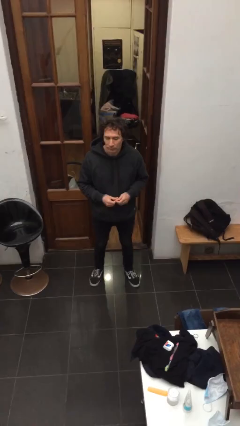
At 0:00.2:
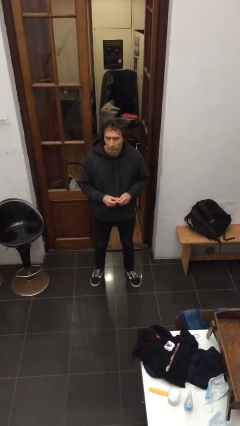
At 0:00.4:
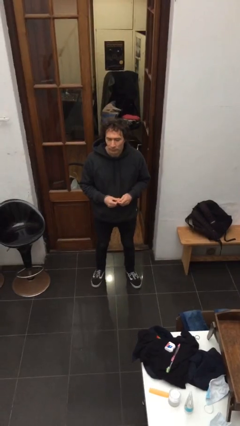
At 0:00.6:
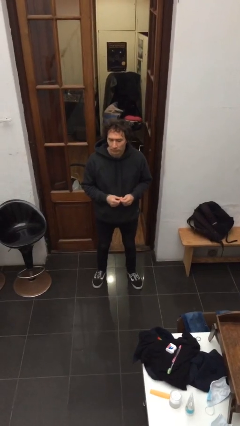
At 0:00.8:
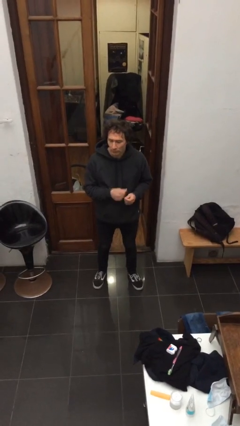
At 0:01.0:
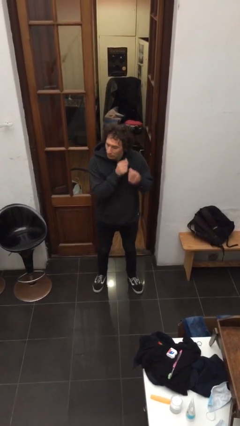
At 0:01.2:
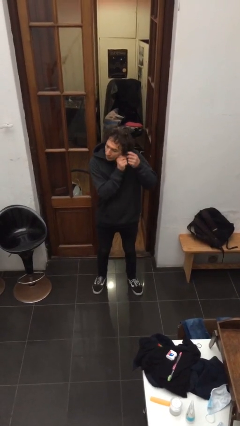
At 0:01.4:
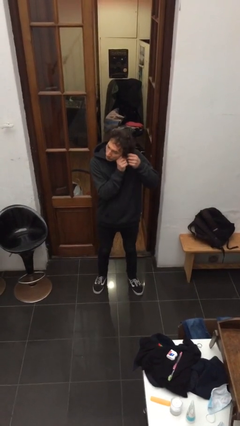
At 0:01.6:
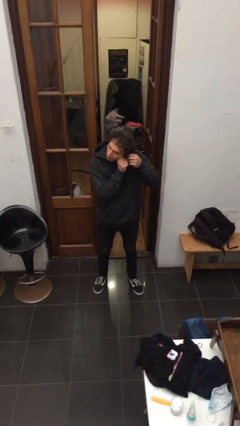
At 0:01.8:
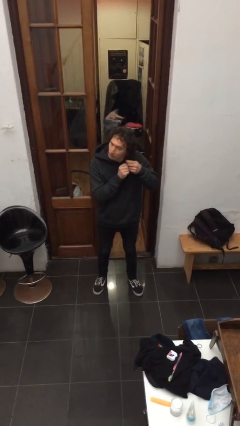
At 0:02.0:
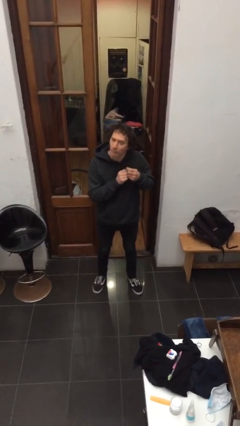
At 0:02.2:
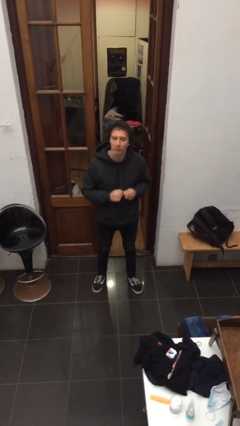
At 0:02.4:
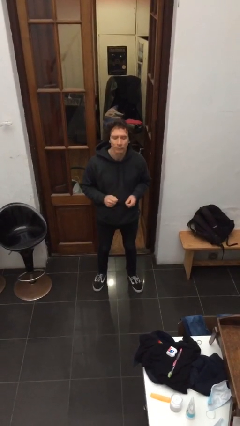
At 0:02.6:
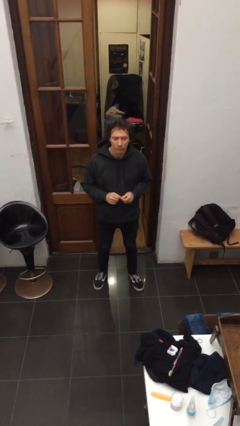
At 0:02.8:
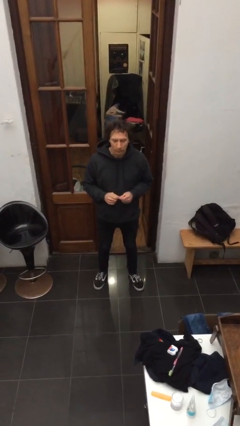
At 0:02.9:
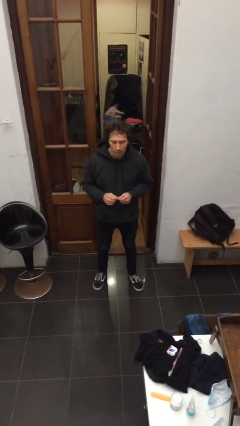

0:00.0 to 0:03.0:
person takes off earrings

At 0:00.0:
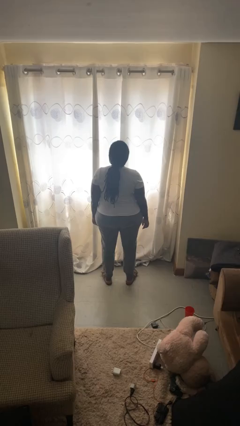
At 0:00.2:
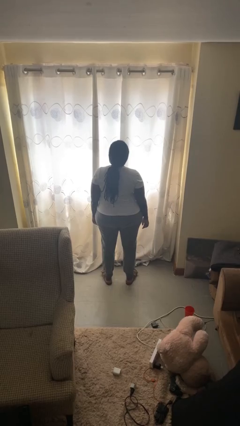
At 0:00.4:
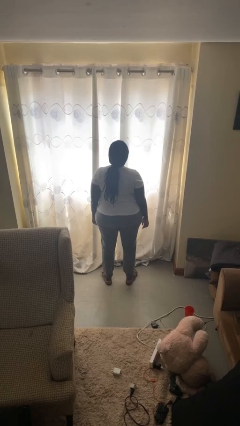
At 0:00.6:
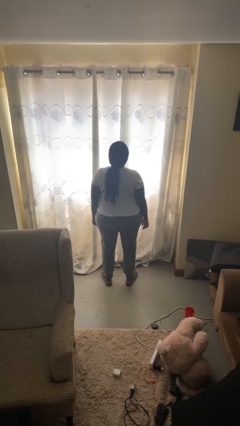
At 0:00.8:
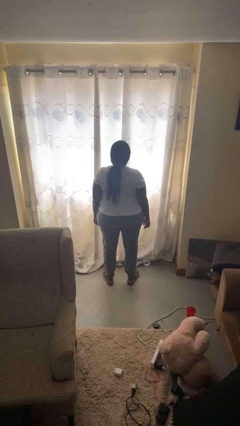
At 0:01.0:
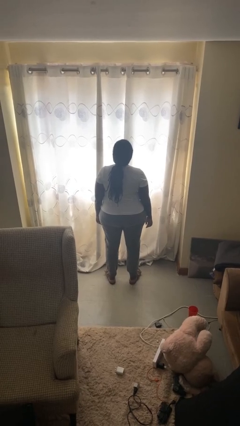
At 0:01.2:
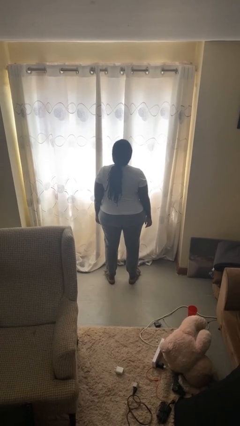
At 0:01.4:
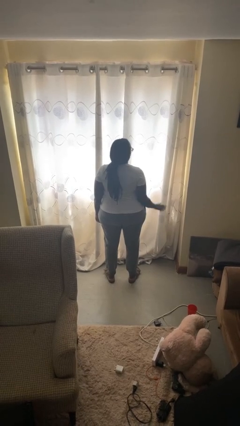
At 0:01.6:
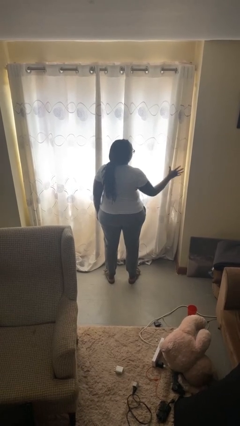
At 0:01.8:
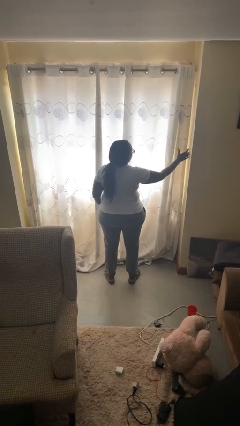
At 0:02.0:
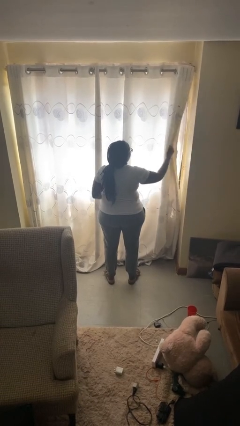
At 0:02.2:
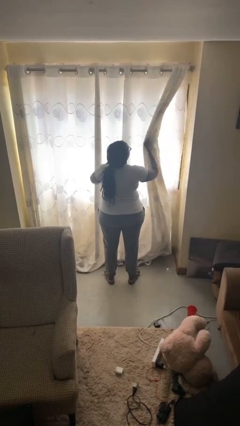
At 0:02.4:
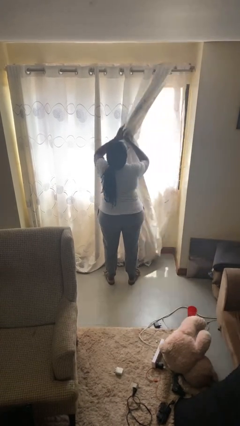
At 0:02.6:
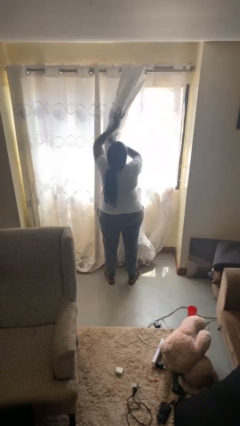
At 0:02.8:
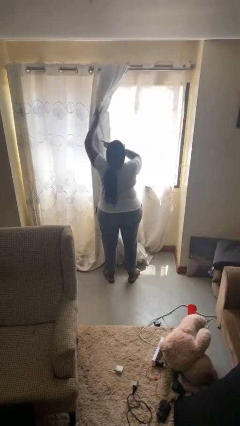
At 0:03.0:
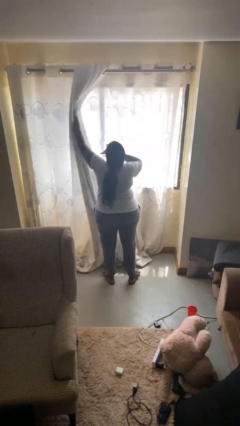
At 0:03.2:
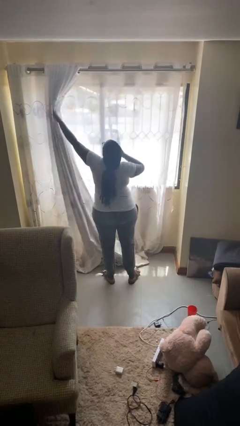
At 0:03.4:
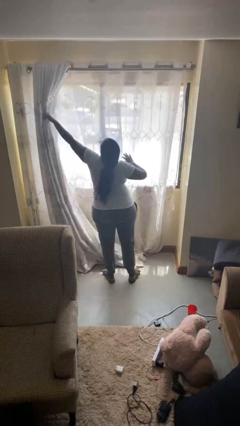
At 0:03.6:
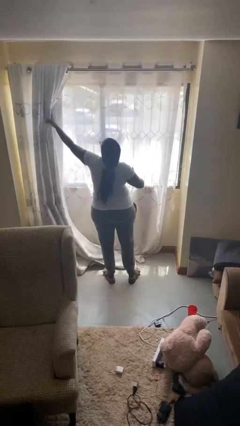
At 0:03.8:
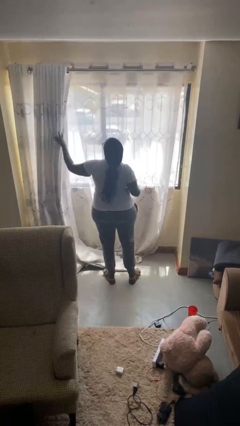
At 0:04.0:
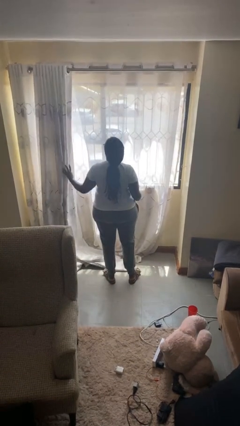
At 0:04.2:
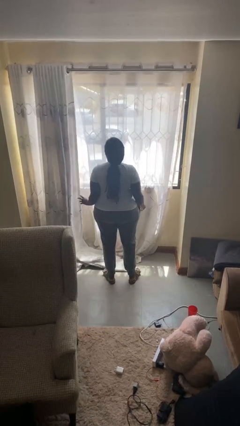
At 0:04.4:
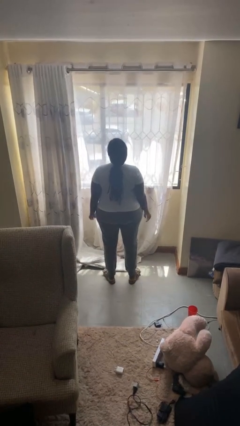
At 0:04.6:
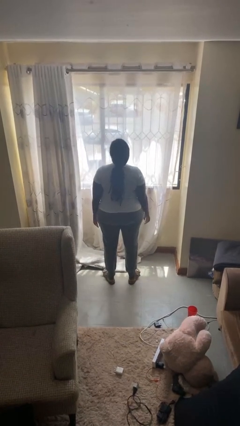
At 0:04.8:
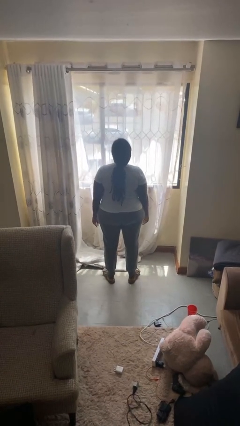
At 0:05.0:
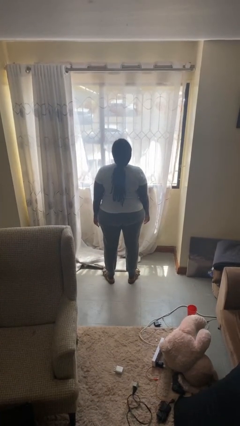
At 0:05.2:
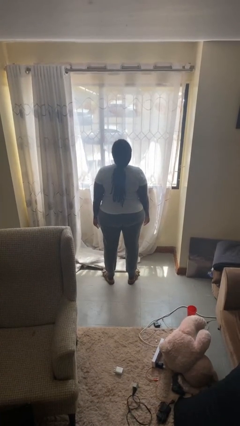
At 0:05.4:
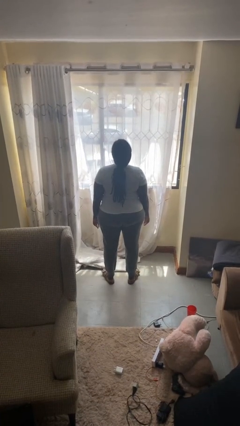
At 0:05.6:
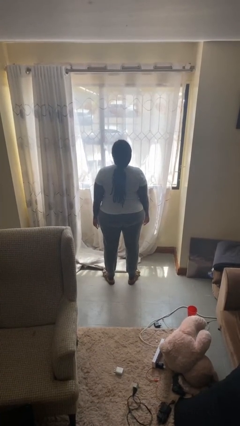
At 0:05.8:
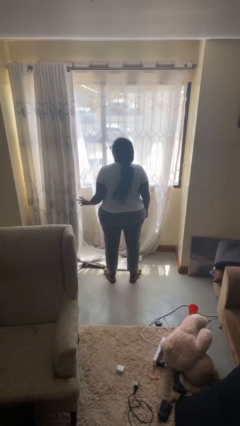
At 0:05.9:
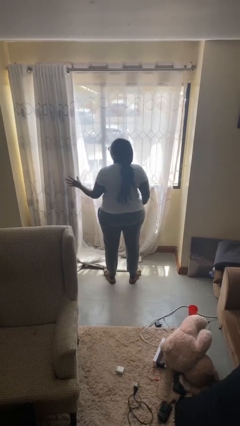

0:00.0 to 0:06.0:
person opens curtains

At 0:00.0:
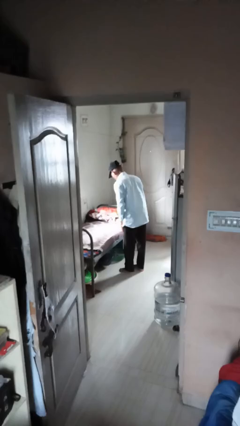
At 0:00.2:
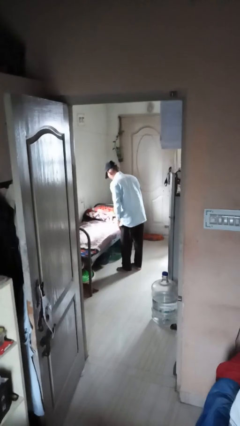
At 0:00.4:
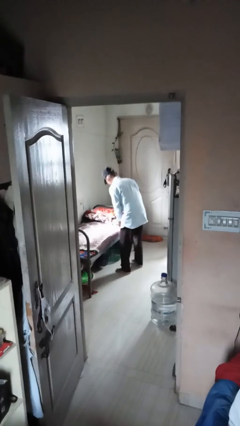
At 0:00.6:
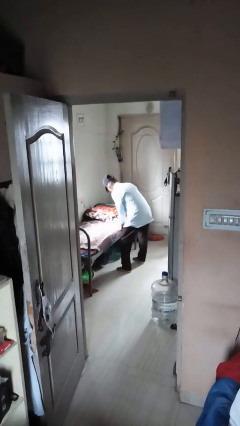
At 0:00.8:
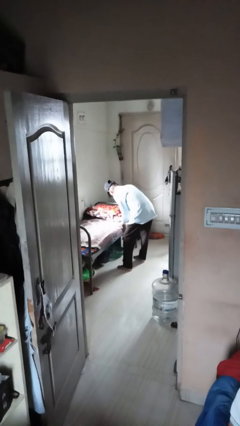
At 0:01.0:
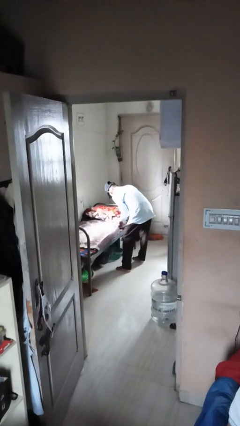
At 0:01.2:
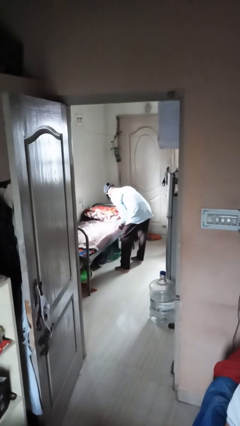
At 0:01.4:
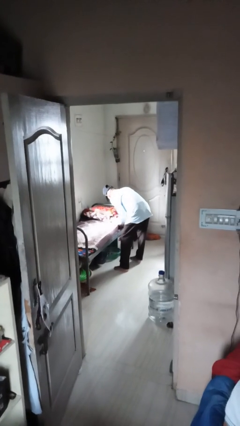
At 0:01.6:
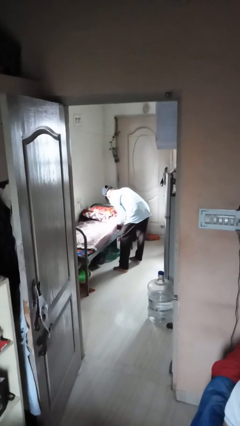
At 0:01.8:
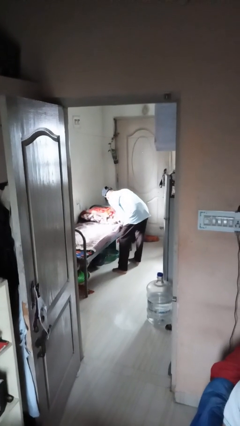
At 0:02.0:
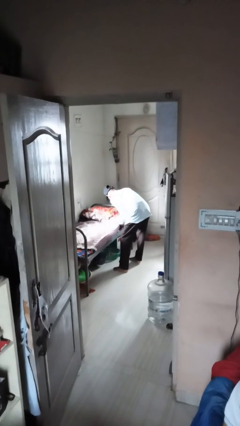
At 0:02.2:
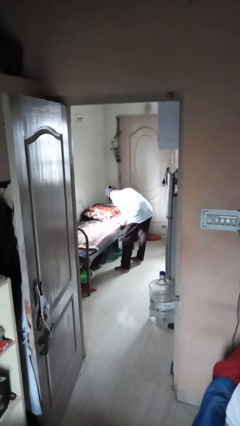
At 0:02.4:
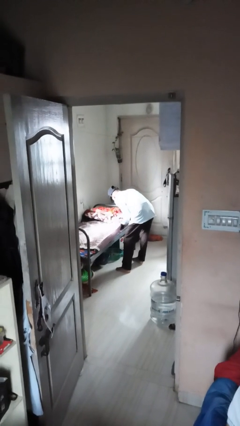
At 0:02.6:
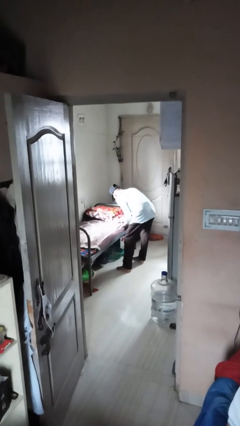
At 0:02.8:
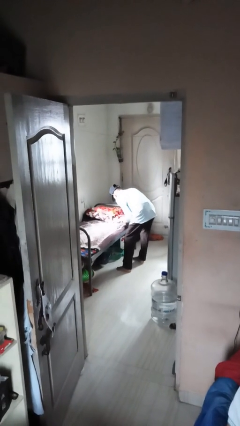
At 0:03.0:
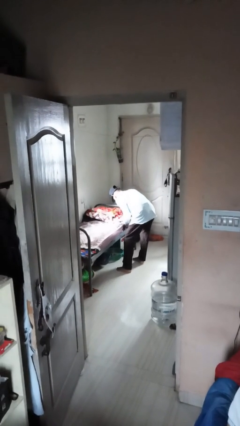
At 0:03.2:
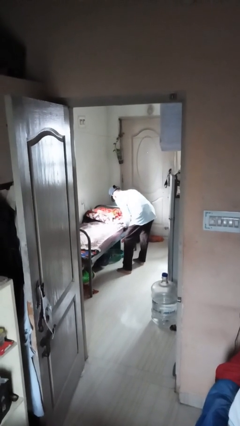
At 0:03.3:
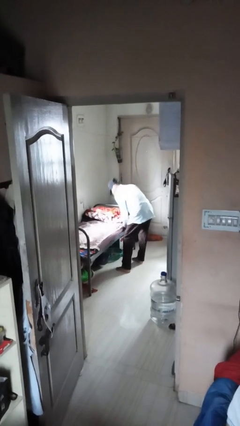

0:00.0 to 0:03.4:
person makes bed

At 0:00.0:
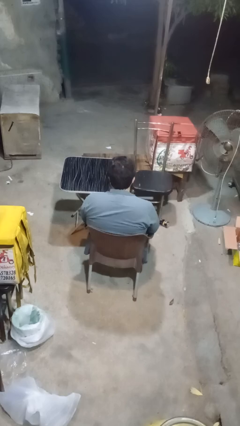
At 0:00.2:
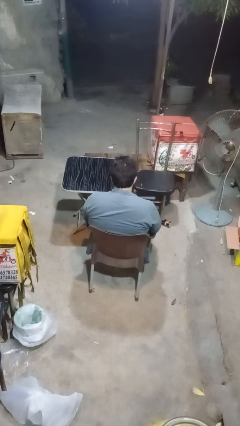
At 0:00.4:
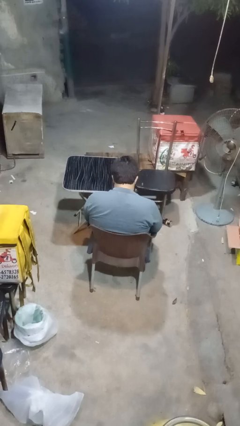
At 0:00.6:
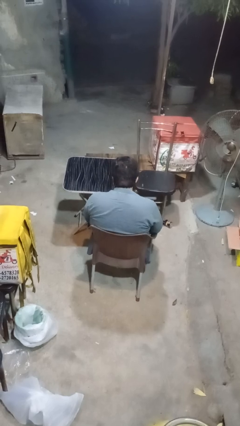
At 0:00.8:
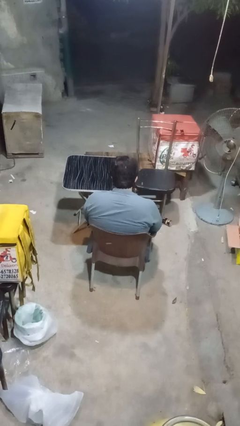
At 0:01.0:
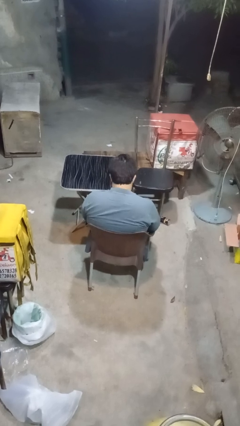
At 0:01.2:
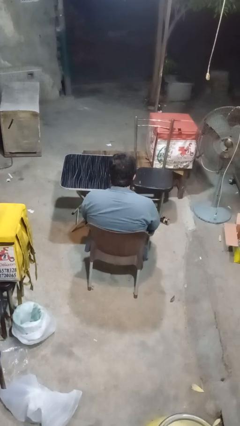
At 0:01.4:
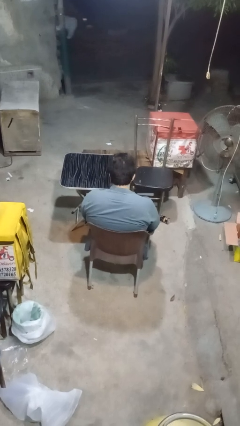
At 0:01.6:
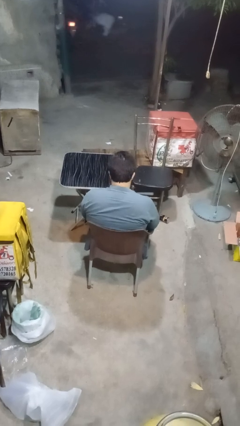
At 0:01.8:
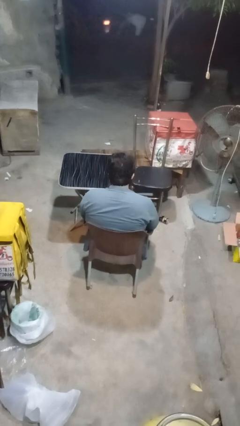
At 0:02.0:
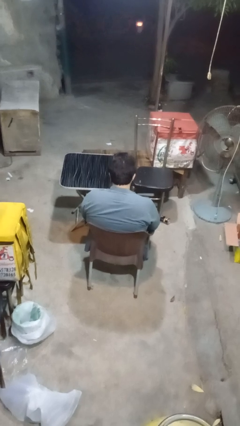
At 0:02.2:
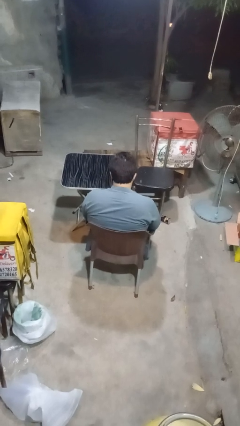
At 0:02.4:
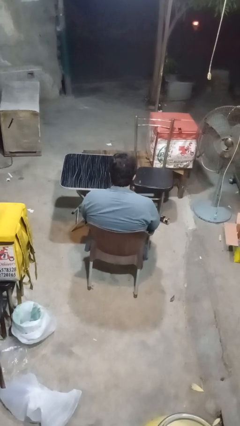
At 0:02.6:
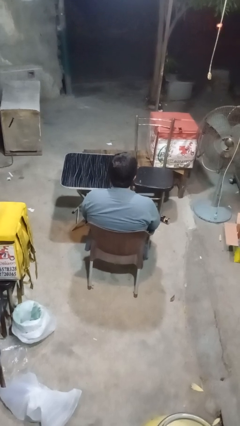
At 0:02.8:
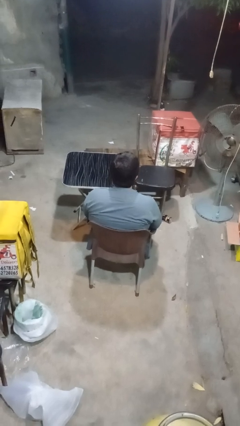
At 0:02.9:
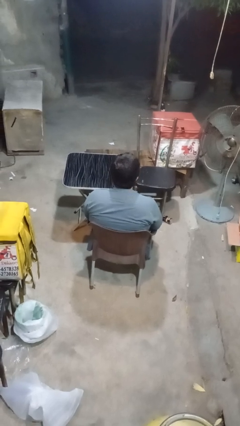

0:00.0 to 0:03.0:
person nods head

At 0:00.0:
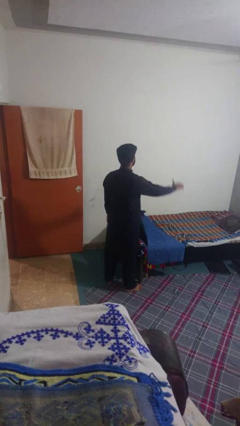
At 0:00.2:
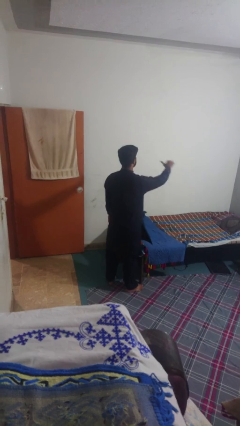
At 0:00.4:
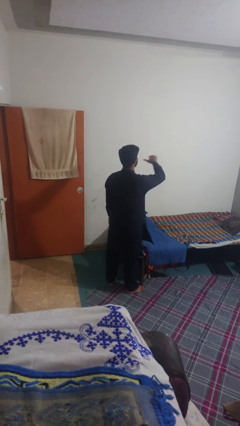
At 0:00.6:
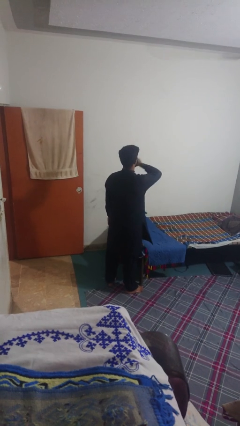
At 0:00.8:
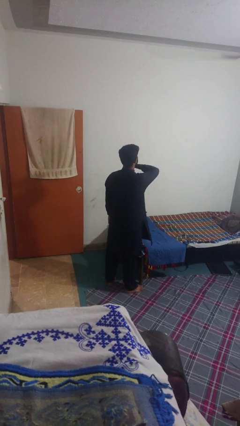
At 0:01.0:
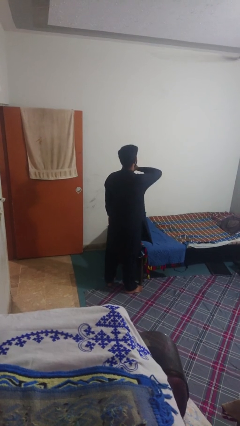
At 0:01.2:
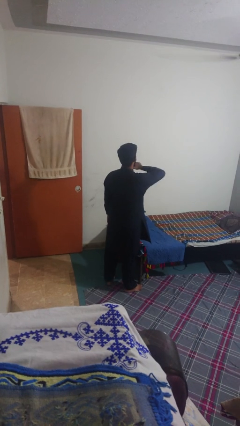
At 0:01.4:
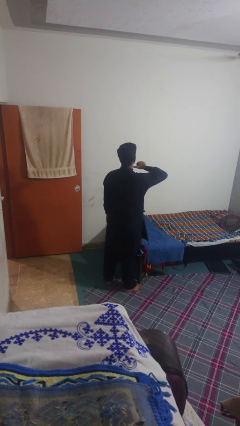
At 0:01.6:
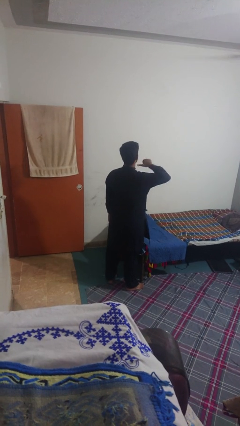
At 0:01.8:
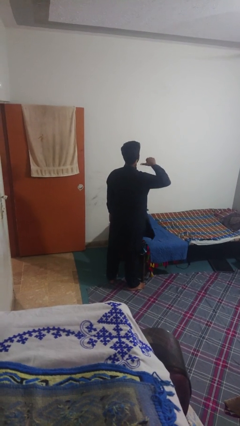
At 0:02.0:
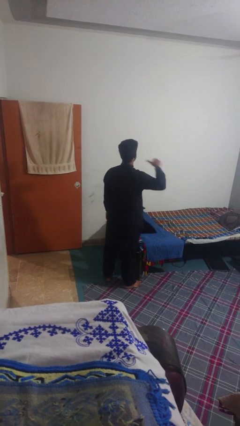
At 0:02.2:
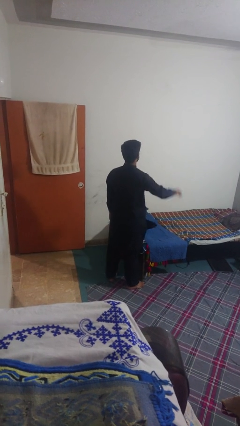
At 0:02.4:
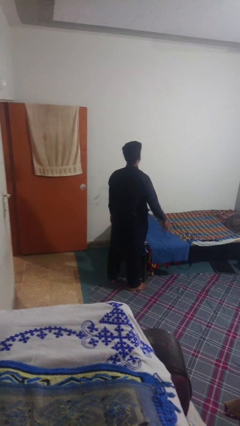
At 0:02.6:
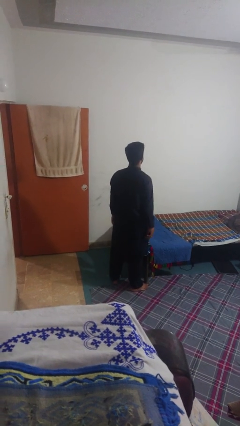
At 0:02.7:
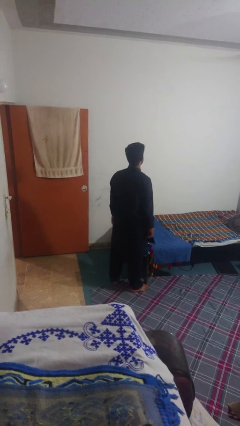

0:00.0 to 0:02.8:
person gestures cut
